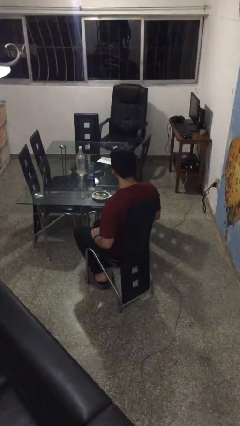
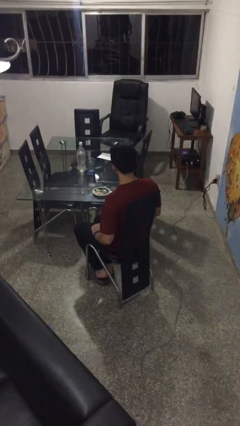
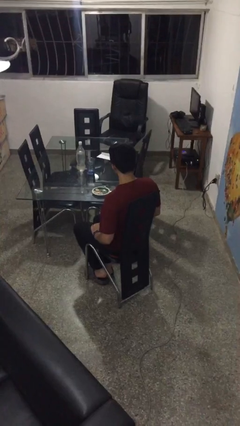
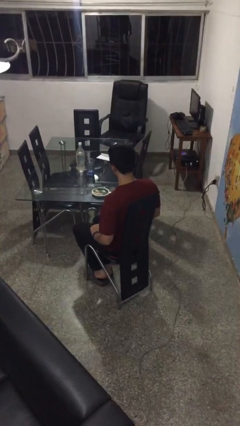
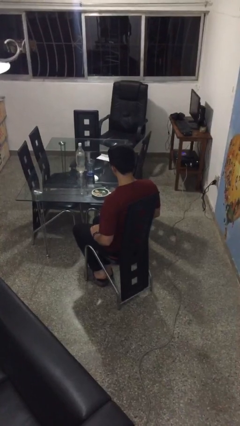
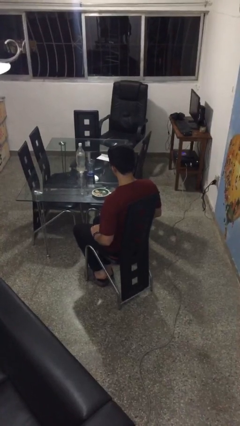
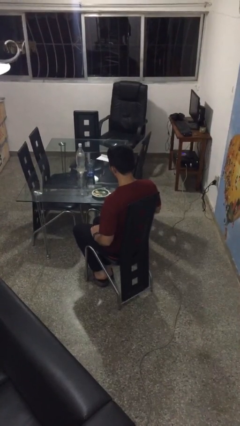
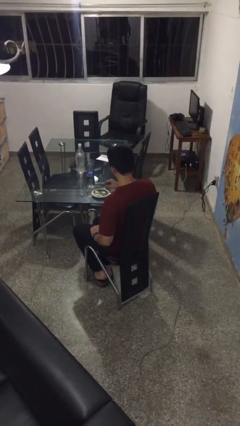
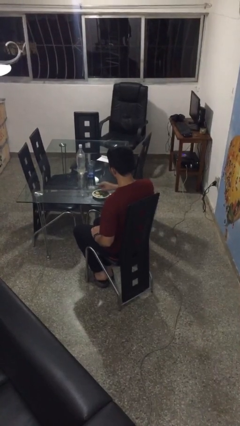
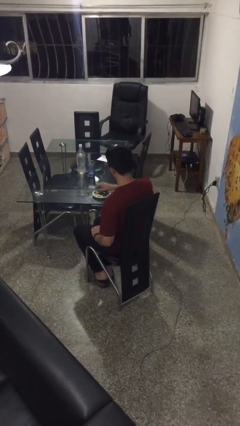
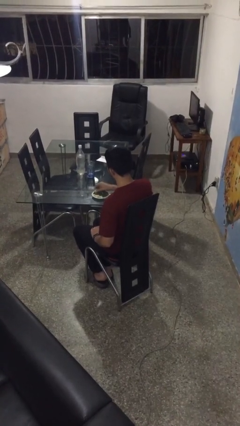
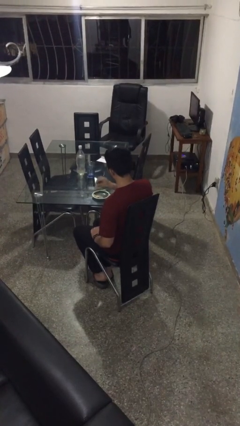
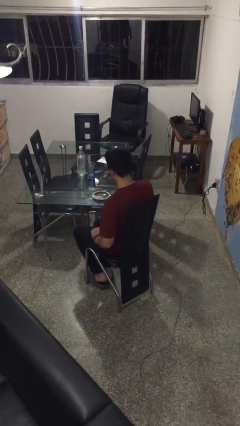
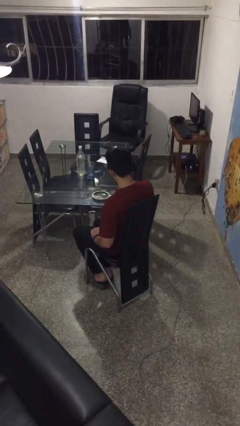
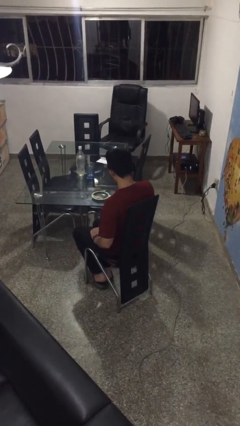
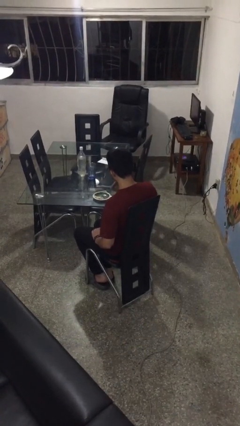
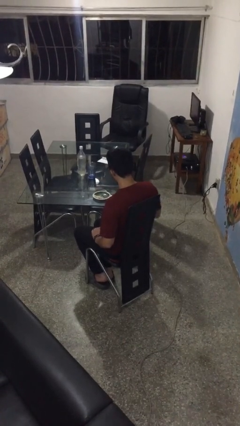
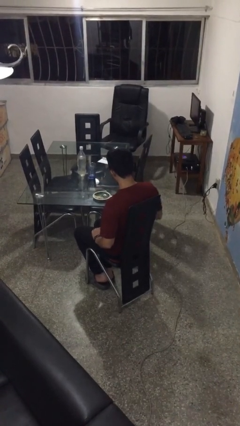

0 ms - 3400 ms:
person eats with hands

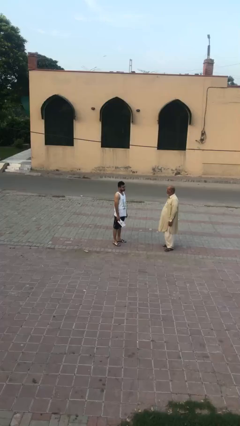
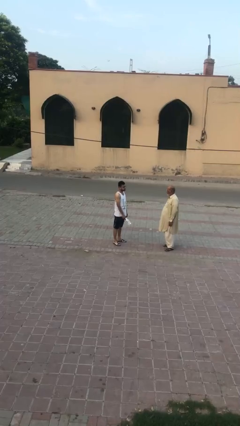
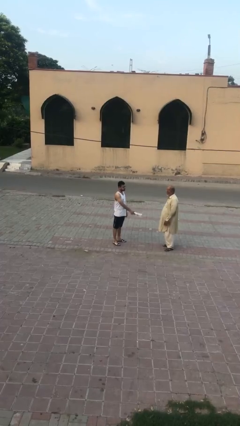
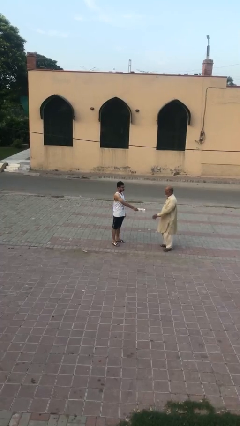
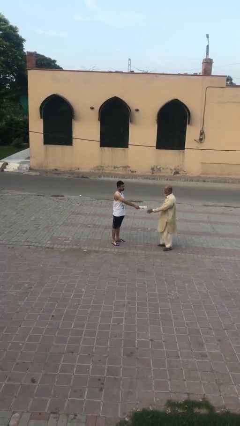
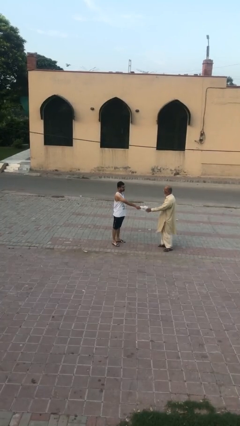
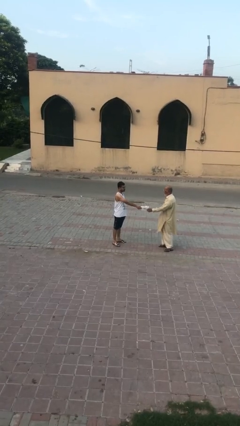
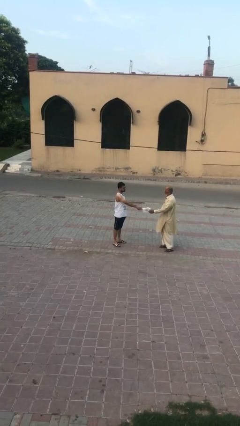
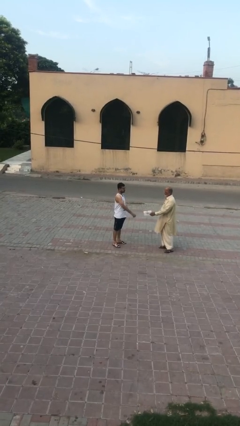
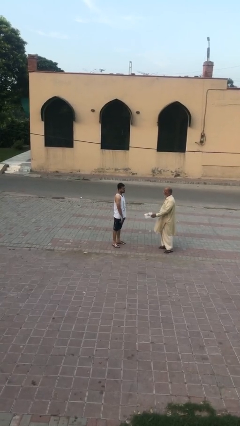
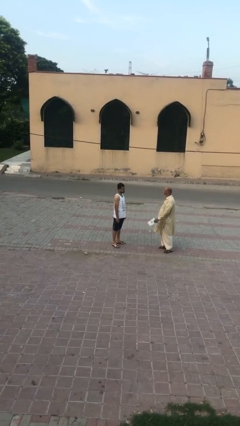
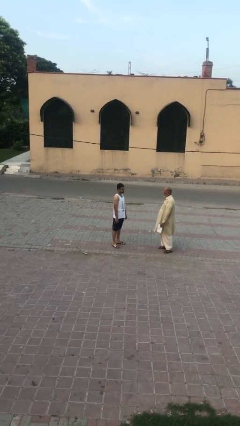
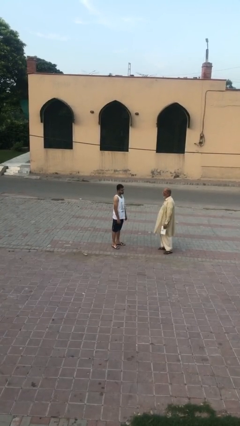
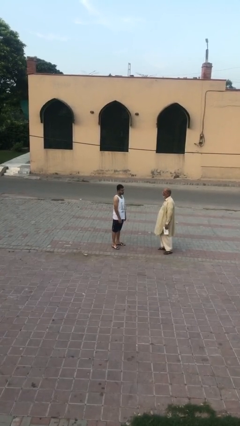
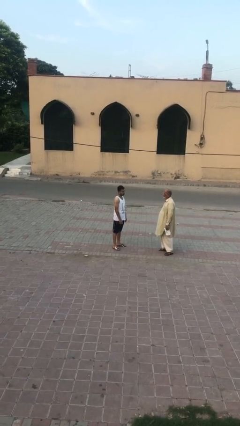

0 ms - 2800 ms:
person transfers object to person

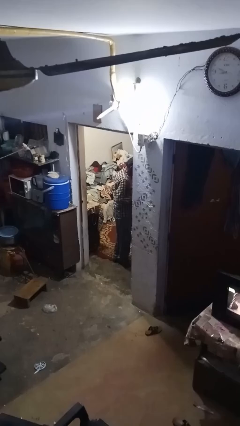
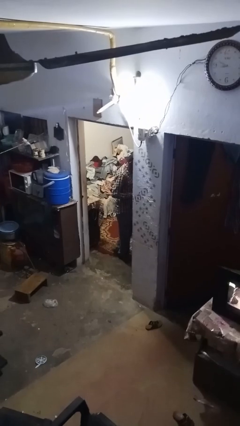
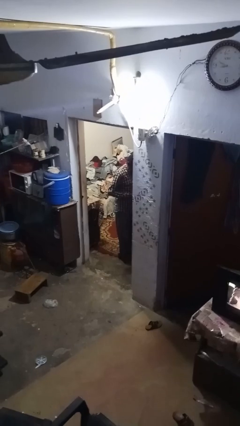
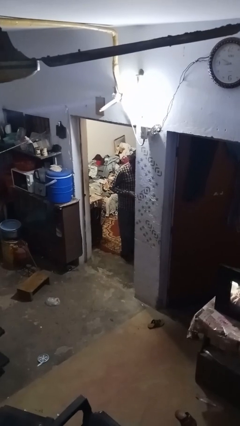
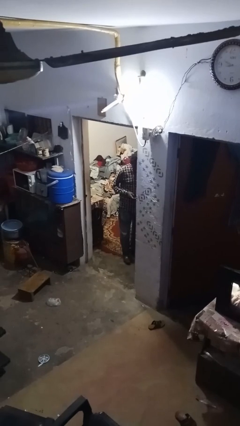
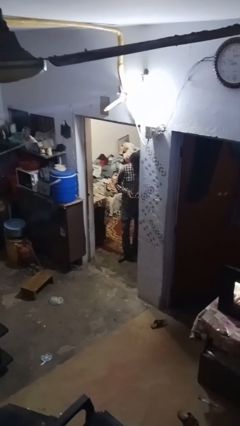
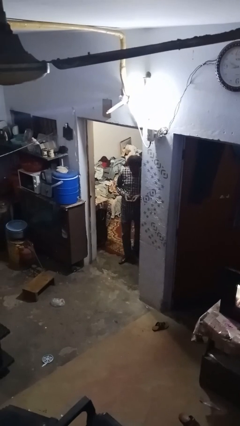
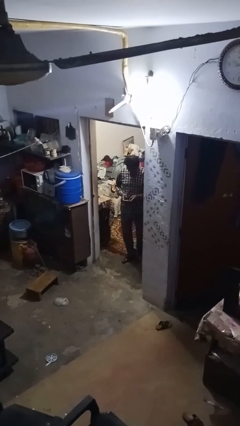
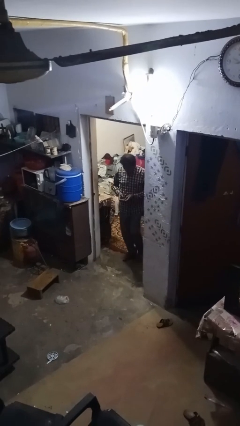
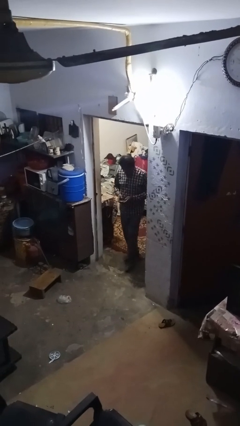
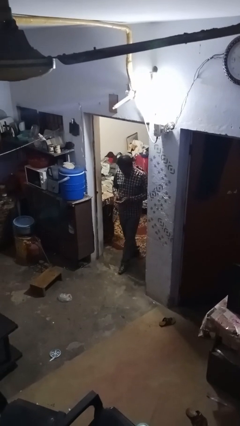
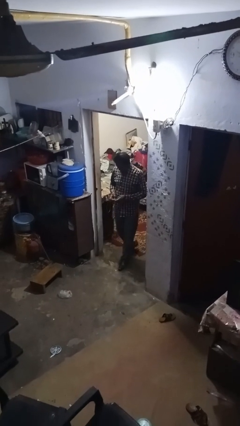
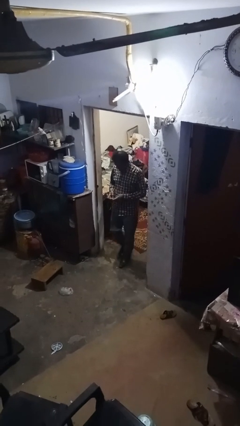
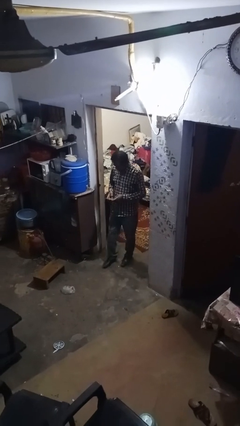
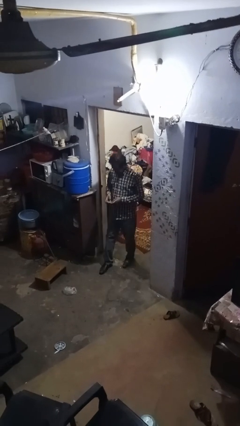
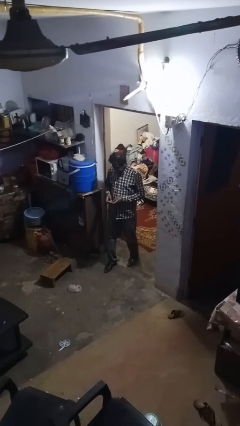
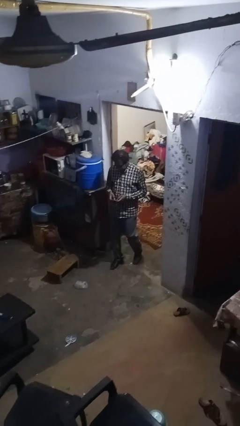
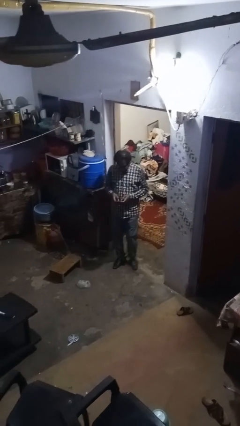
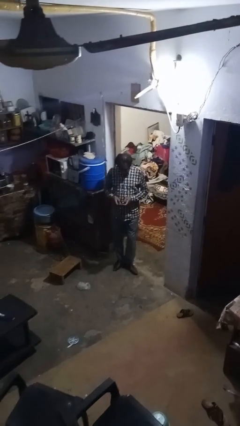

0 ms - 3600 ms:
person enters scene through structure

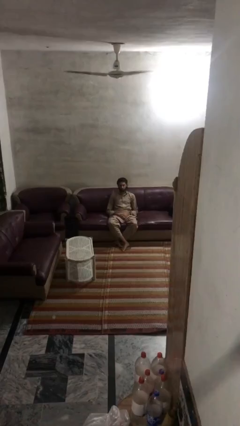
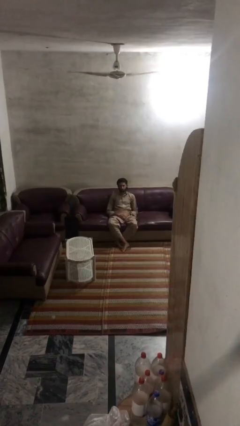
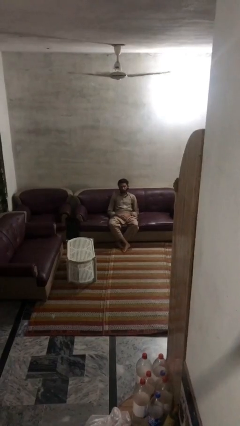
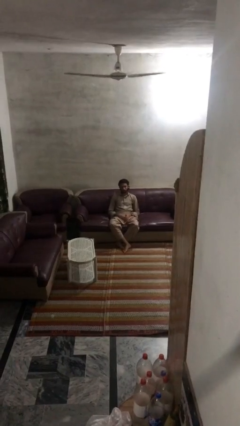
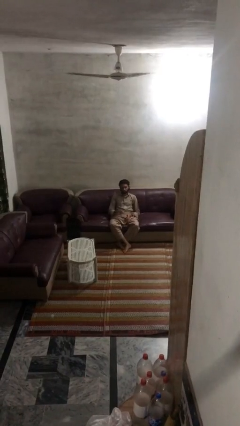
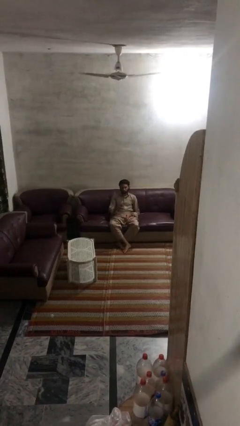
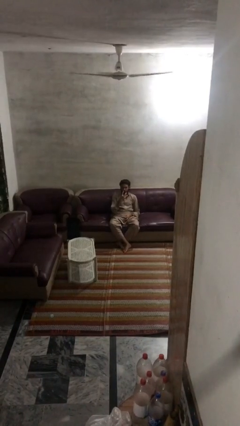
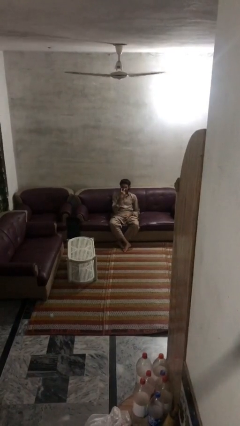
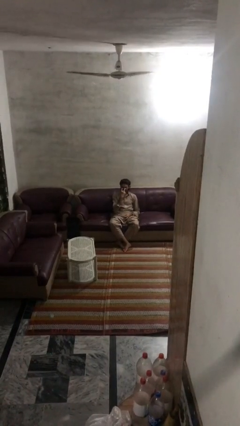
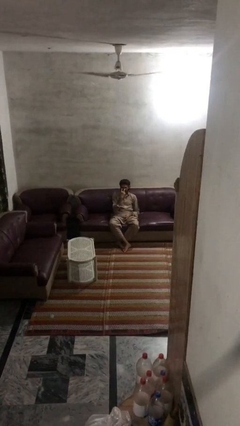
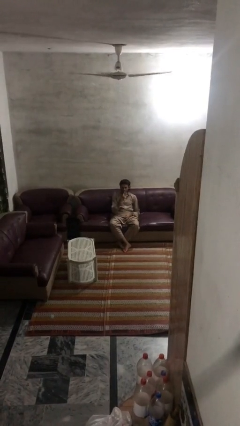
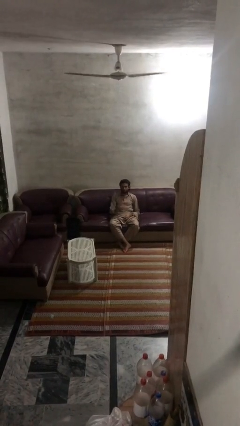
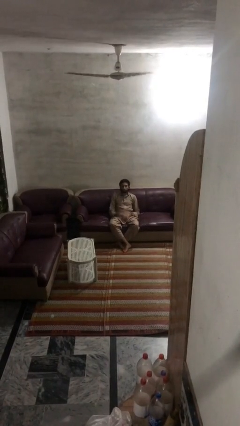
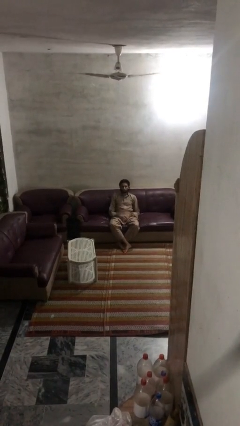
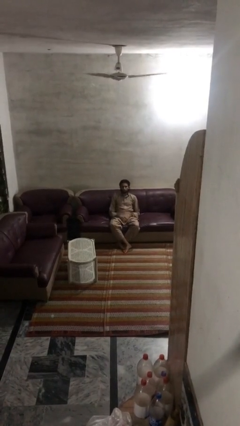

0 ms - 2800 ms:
person gestures watch closely

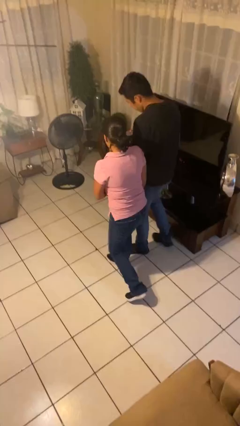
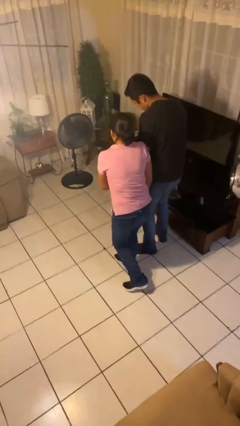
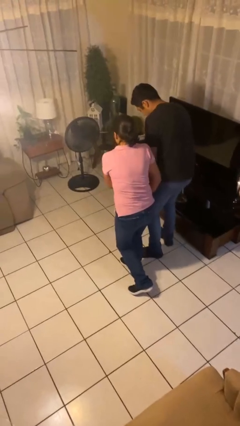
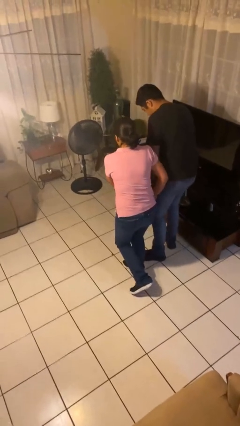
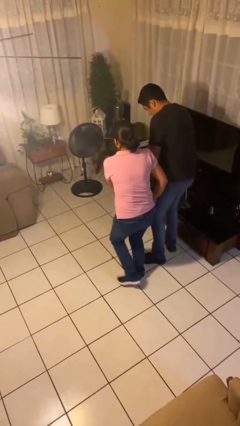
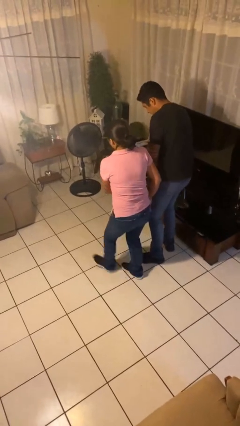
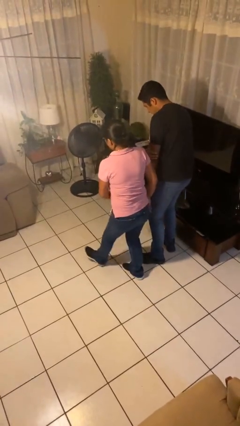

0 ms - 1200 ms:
person bumps into person

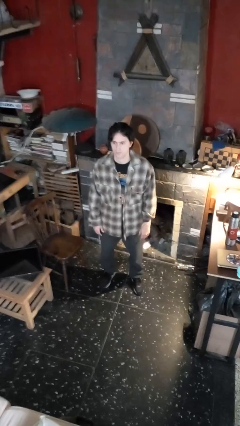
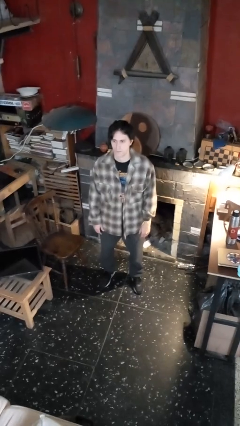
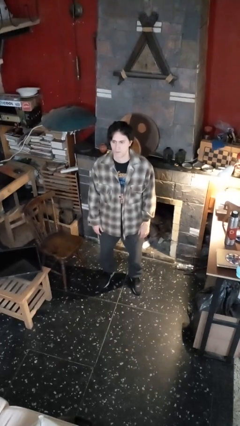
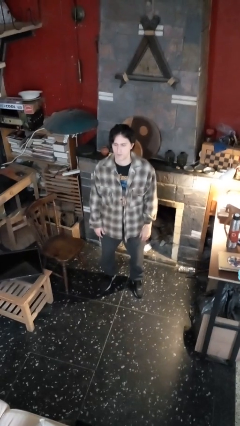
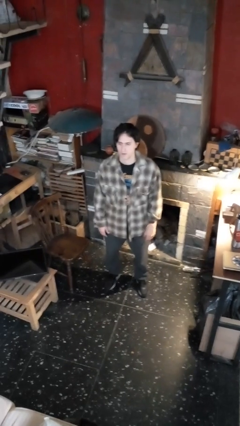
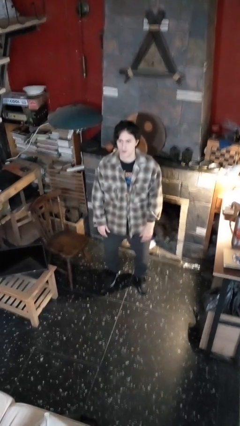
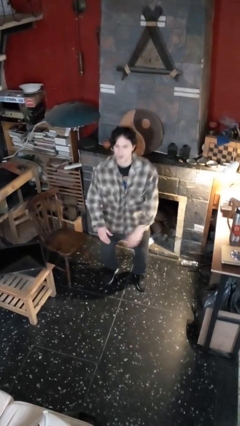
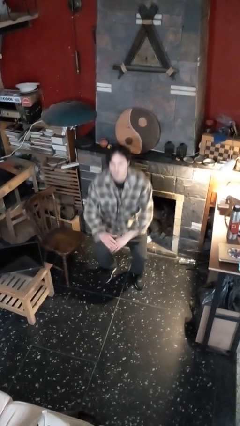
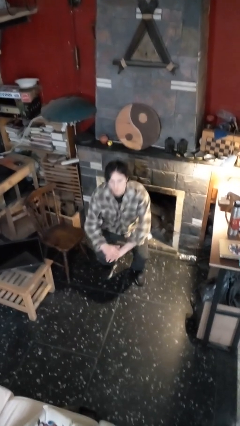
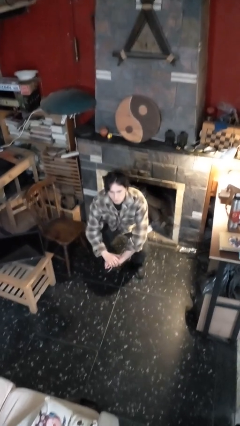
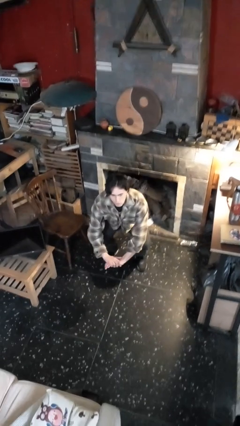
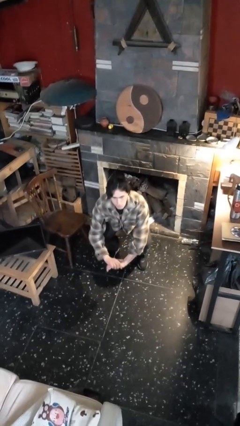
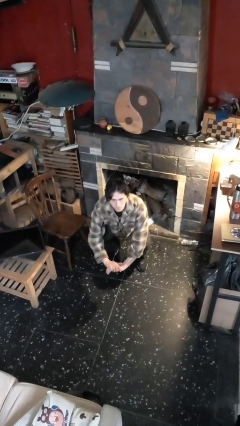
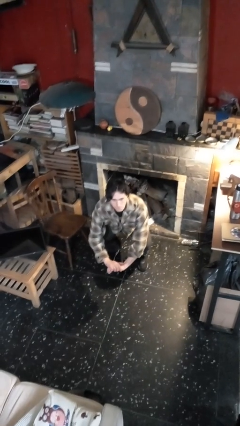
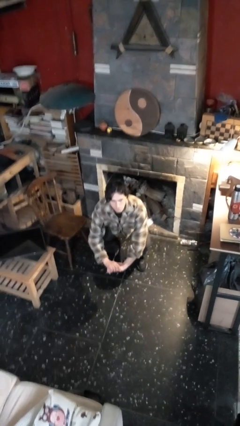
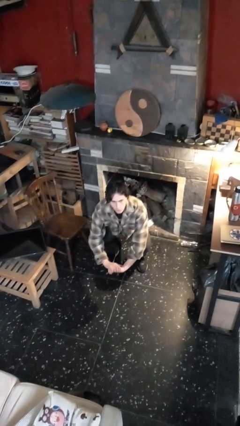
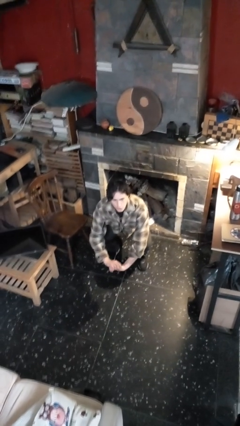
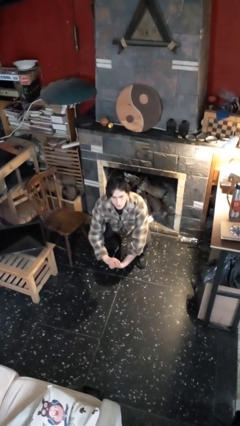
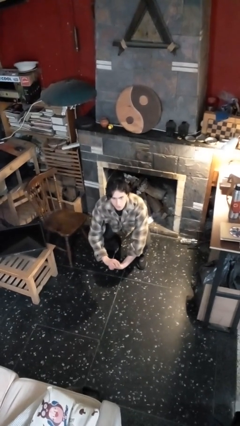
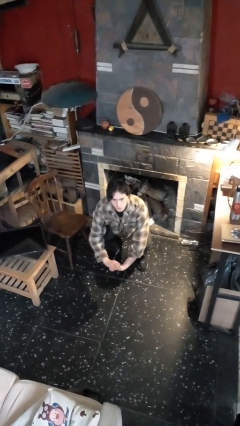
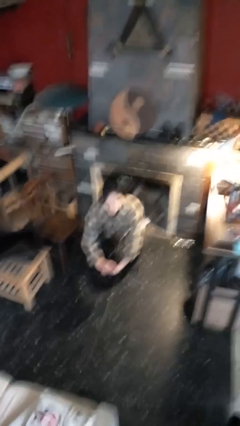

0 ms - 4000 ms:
person squats
